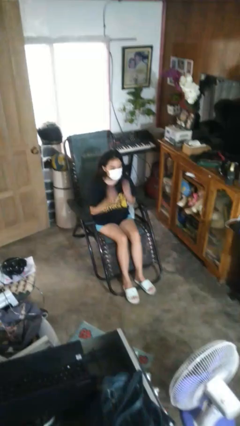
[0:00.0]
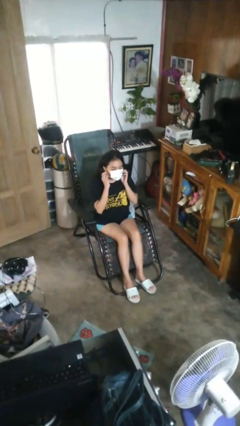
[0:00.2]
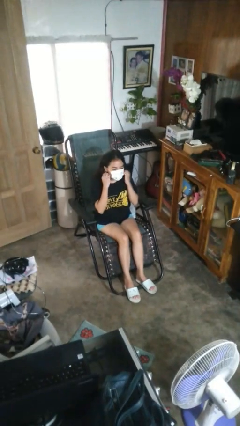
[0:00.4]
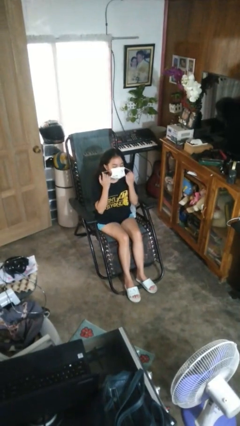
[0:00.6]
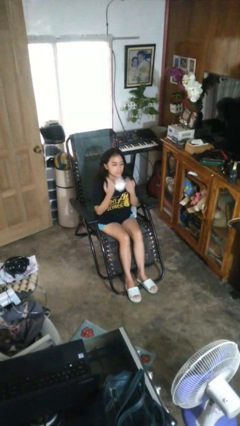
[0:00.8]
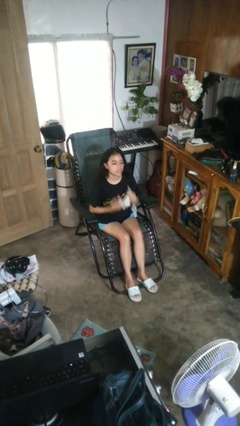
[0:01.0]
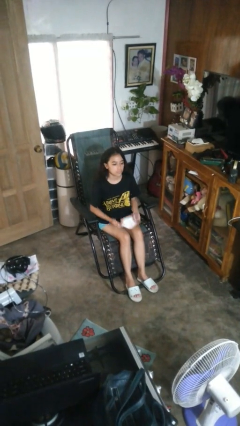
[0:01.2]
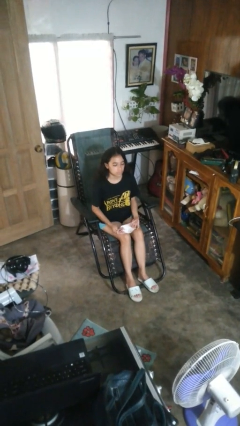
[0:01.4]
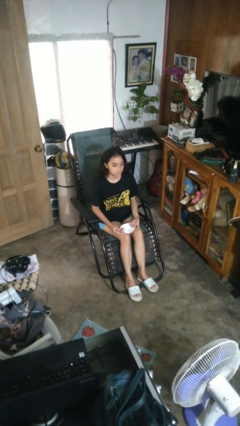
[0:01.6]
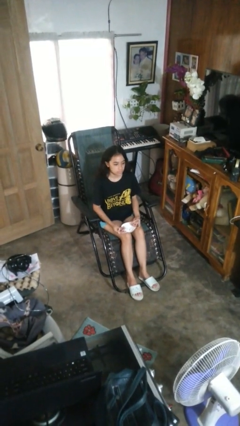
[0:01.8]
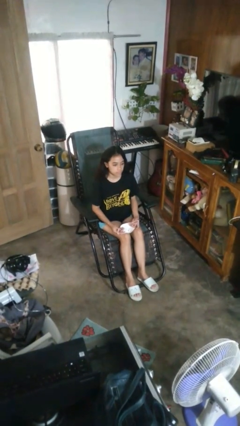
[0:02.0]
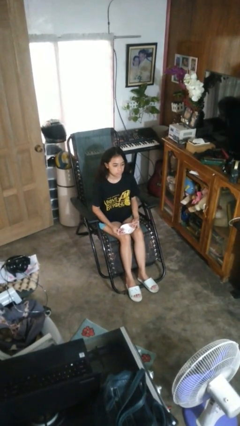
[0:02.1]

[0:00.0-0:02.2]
person takes off facemask

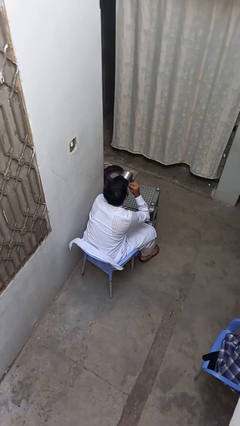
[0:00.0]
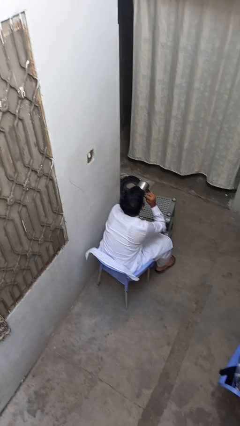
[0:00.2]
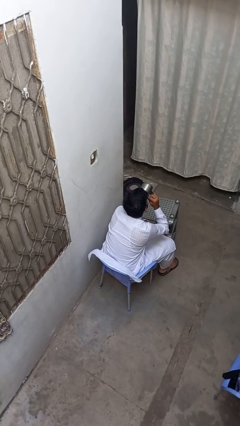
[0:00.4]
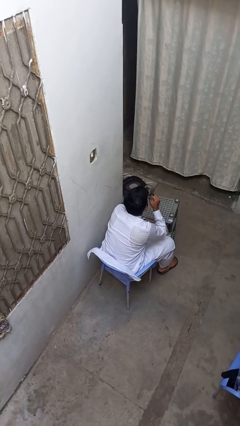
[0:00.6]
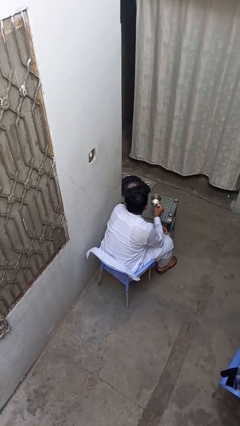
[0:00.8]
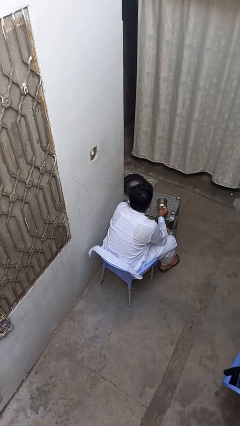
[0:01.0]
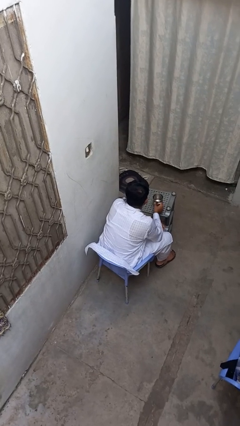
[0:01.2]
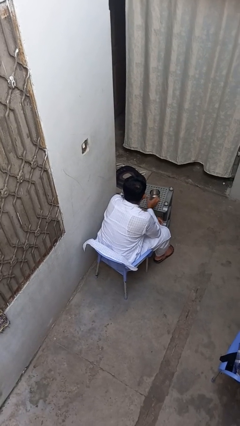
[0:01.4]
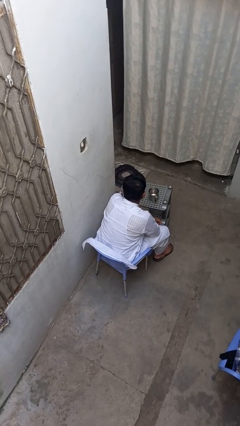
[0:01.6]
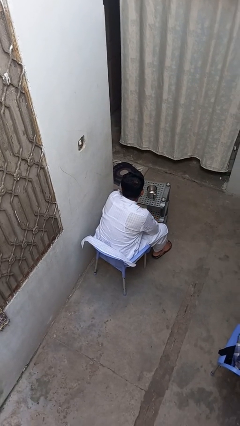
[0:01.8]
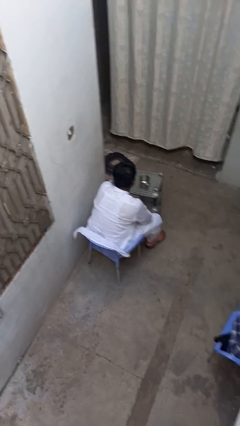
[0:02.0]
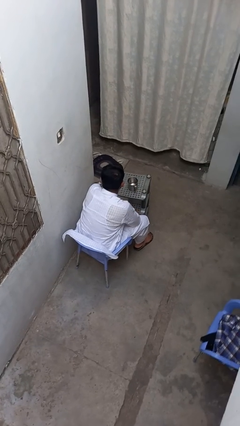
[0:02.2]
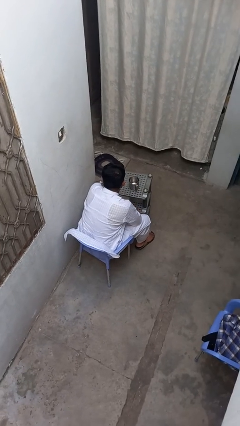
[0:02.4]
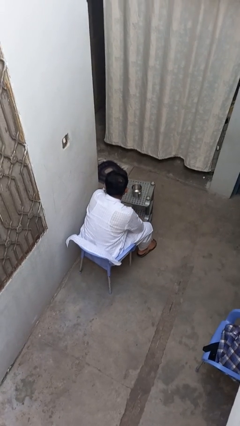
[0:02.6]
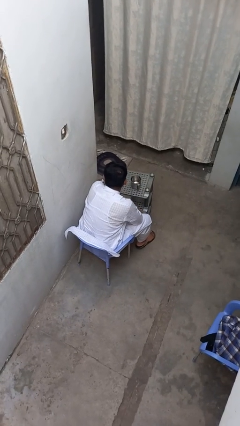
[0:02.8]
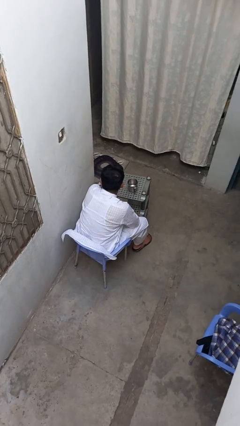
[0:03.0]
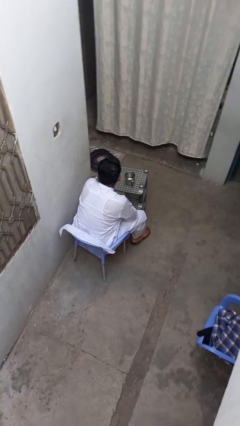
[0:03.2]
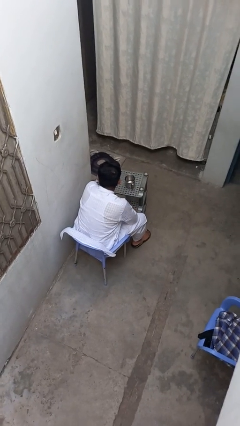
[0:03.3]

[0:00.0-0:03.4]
person puts down object on table

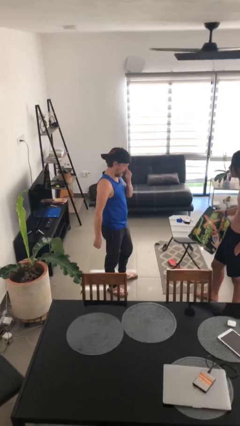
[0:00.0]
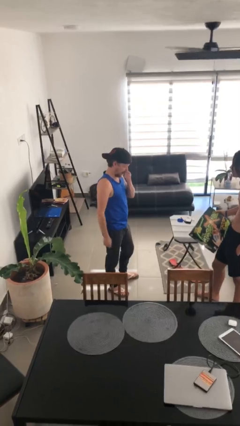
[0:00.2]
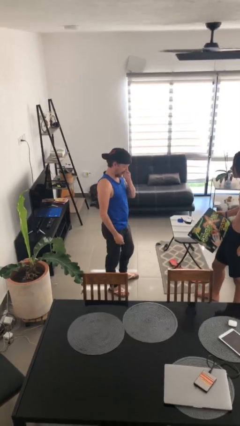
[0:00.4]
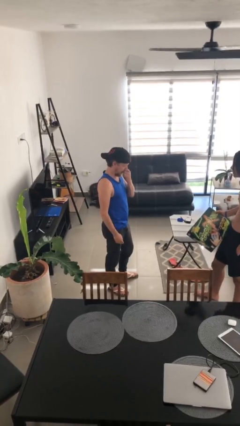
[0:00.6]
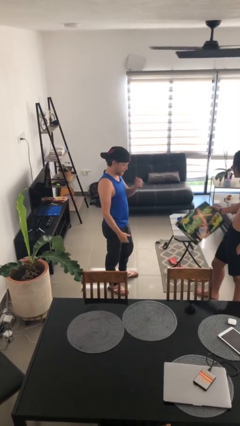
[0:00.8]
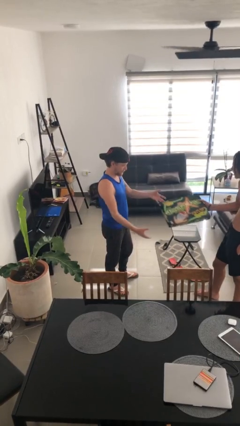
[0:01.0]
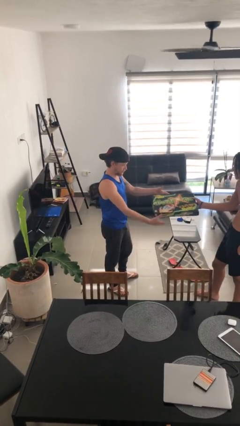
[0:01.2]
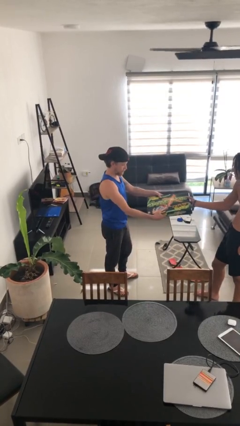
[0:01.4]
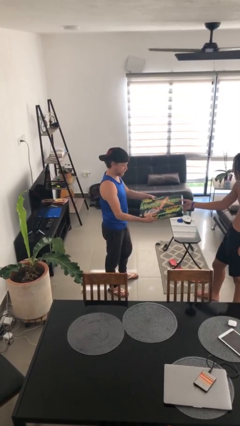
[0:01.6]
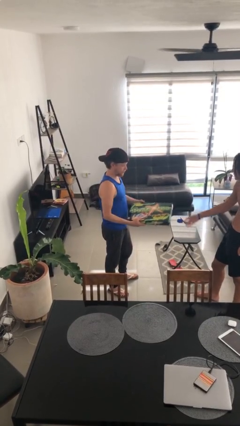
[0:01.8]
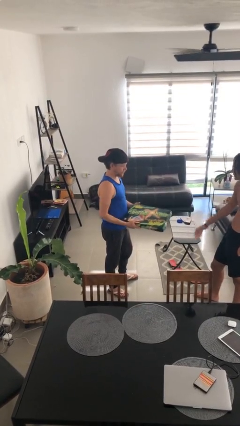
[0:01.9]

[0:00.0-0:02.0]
person transfers object to person

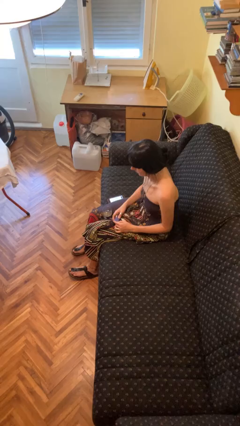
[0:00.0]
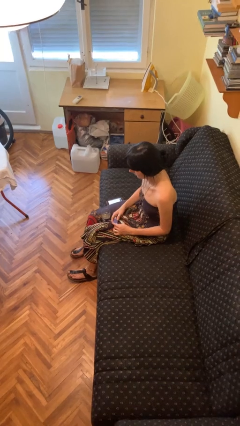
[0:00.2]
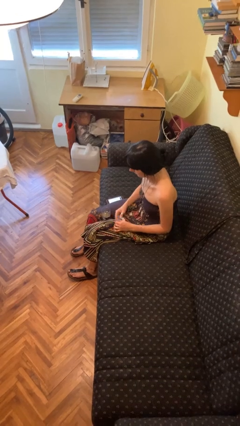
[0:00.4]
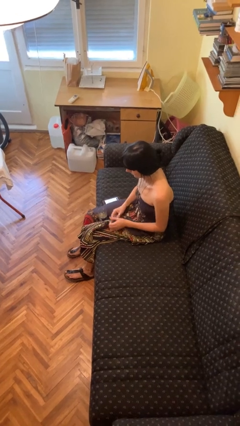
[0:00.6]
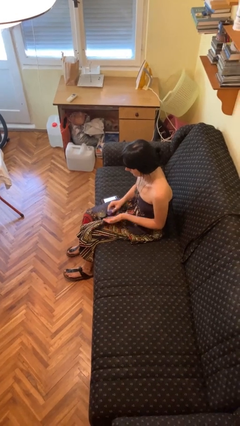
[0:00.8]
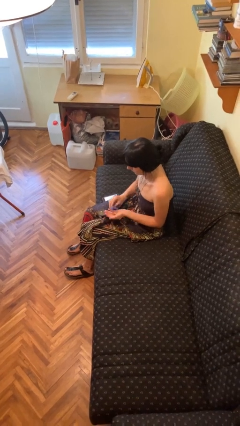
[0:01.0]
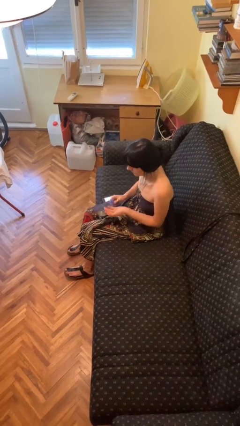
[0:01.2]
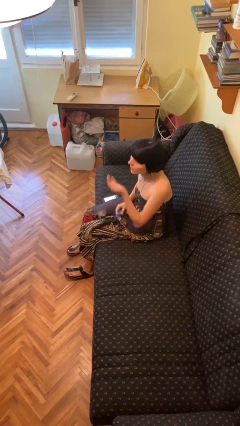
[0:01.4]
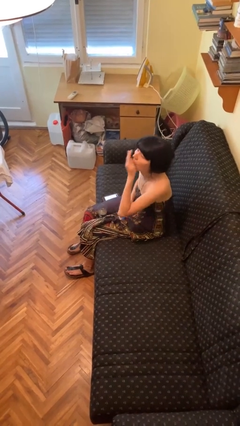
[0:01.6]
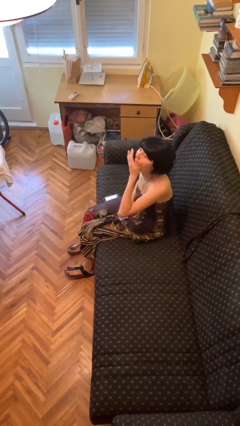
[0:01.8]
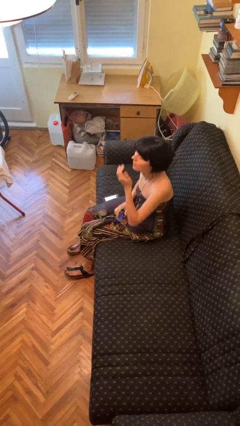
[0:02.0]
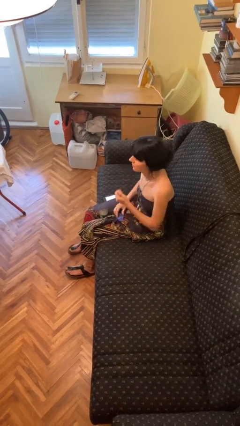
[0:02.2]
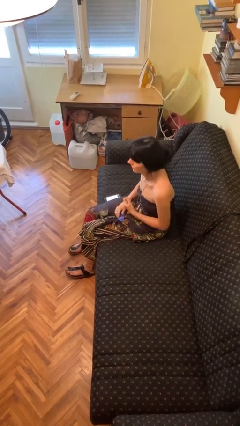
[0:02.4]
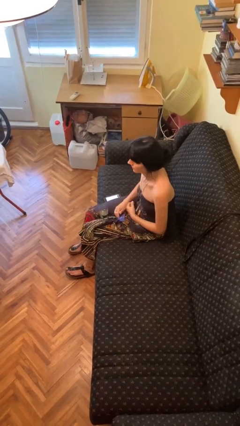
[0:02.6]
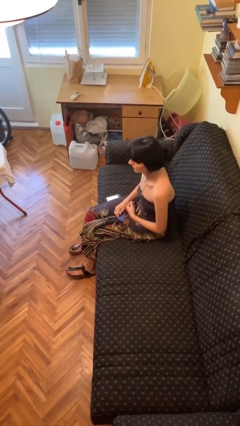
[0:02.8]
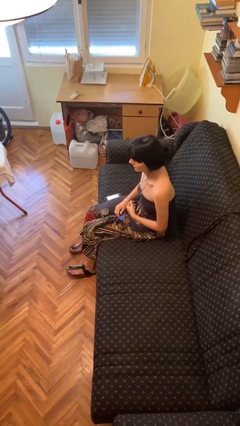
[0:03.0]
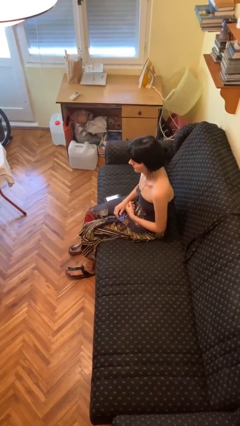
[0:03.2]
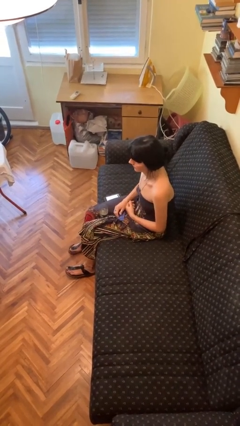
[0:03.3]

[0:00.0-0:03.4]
person takes medicine pills

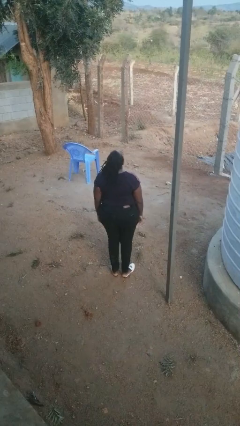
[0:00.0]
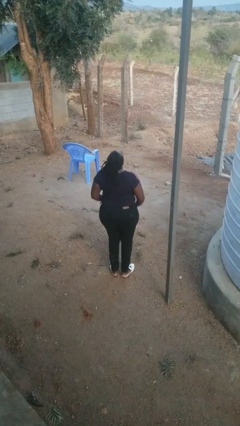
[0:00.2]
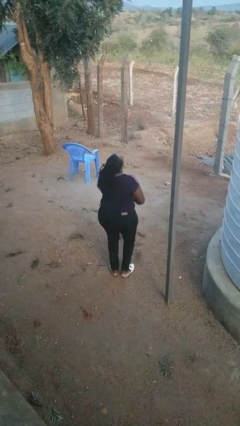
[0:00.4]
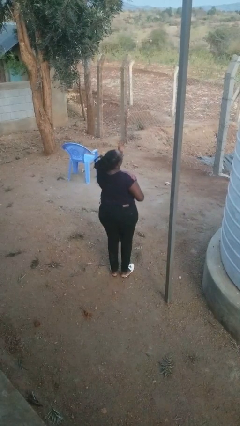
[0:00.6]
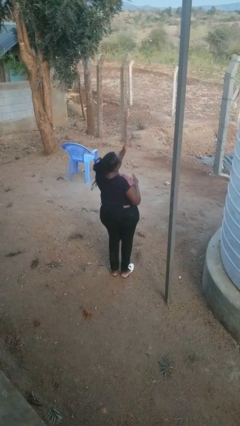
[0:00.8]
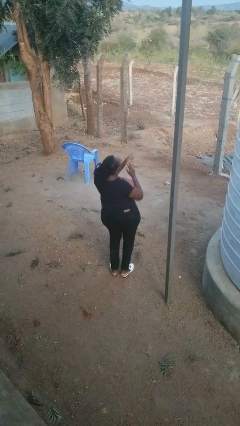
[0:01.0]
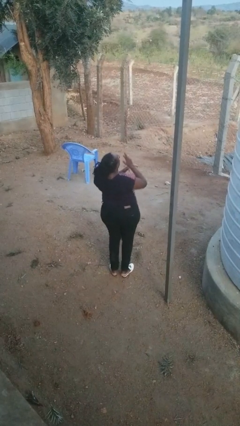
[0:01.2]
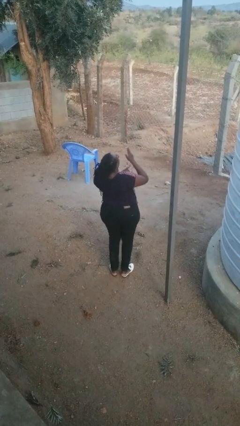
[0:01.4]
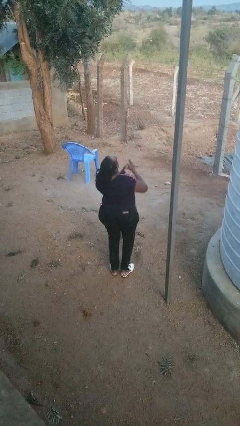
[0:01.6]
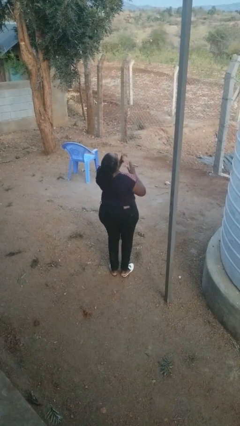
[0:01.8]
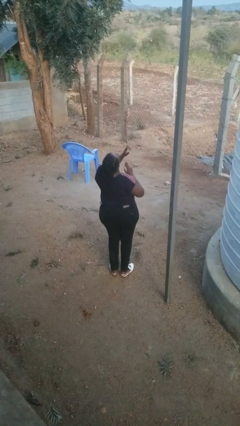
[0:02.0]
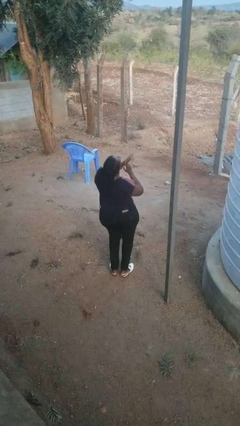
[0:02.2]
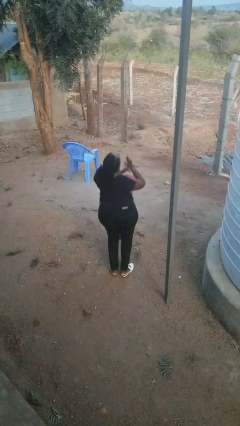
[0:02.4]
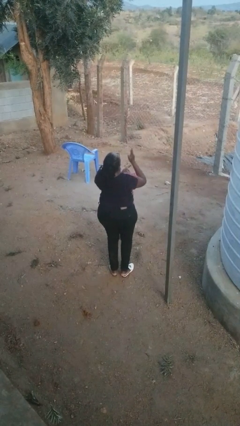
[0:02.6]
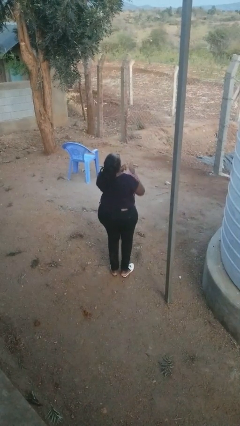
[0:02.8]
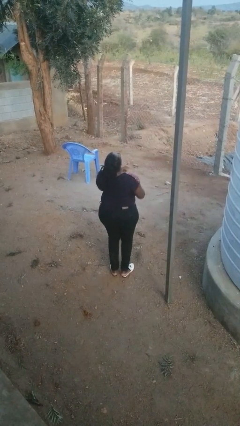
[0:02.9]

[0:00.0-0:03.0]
person dances in place

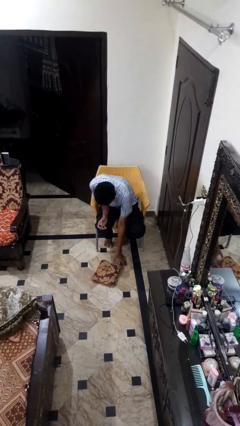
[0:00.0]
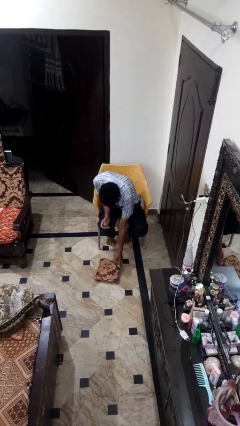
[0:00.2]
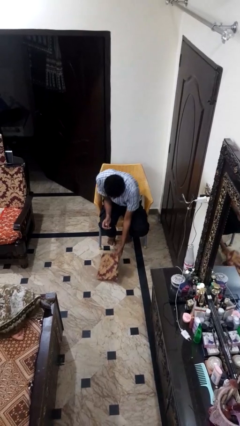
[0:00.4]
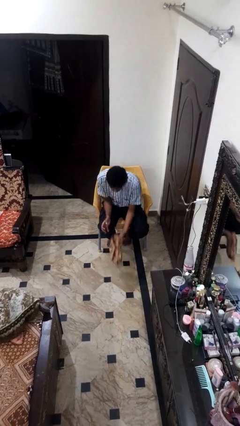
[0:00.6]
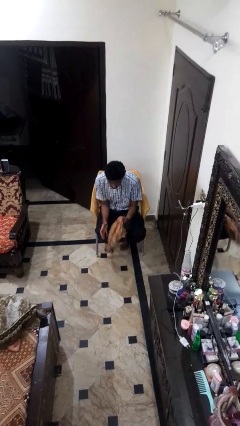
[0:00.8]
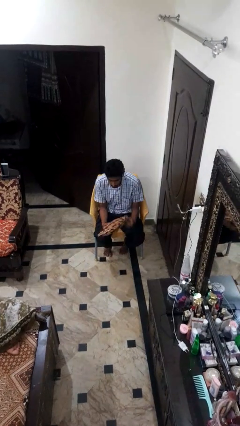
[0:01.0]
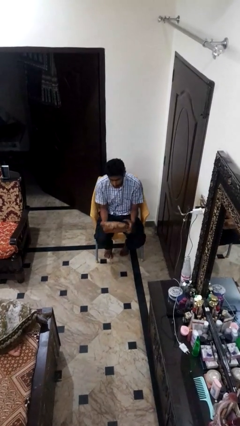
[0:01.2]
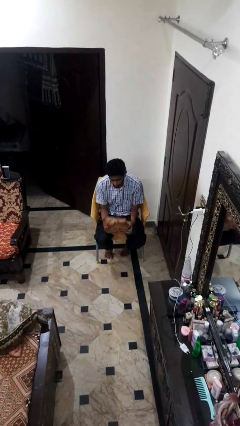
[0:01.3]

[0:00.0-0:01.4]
person picks up object from floor

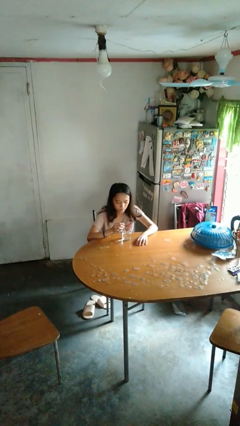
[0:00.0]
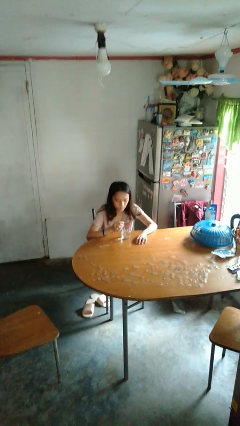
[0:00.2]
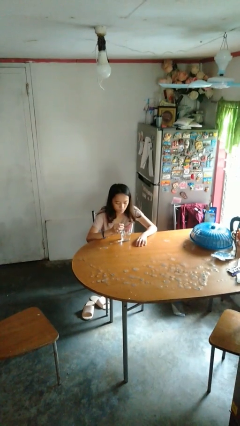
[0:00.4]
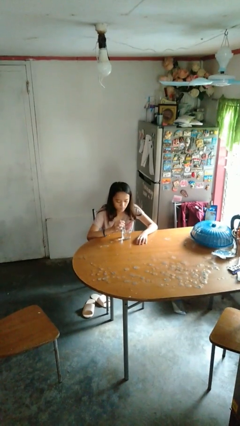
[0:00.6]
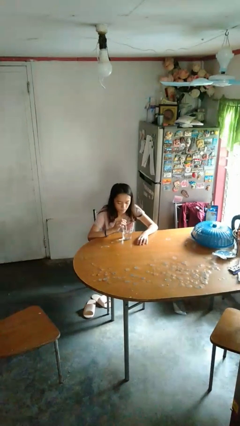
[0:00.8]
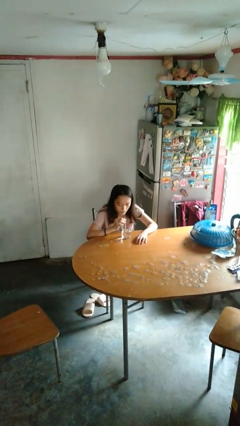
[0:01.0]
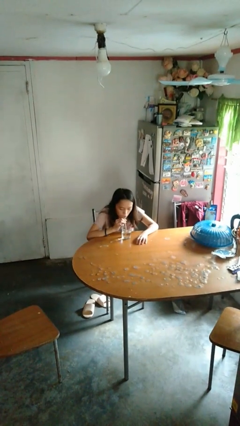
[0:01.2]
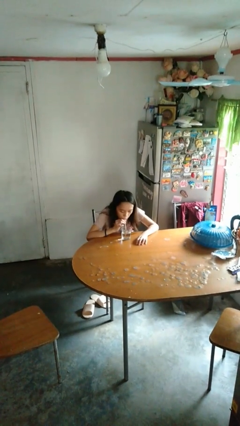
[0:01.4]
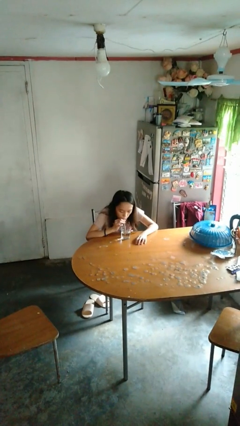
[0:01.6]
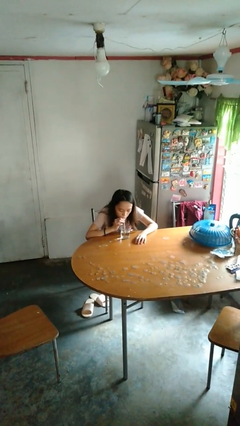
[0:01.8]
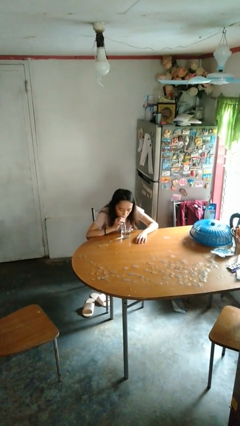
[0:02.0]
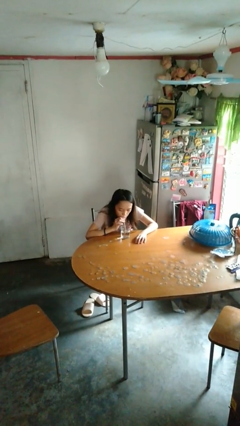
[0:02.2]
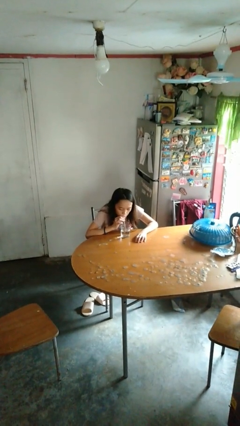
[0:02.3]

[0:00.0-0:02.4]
person drinks from straw
